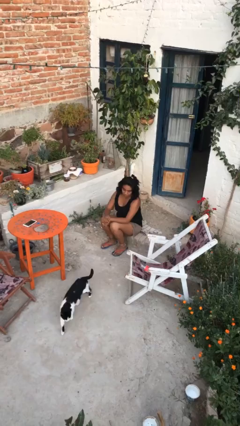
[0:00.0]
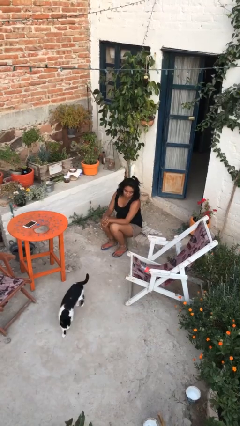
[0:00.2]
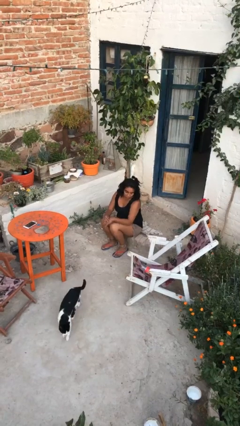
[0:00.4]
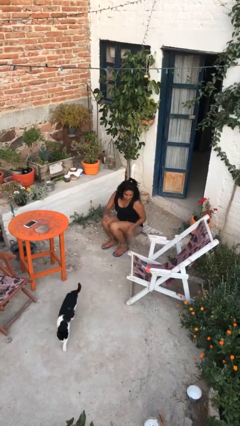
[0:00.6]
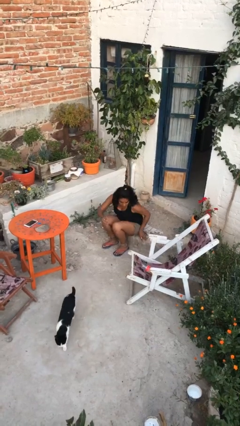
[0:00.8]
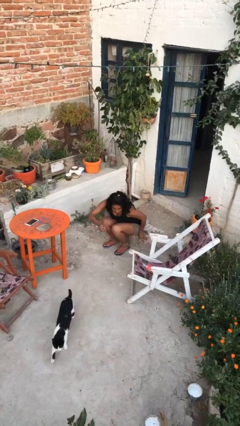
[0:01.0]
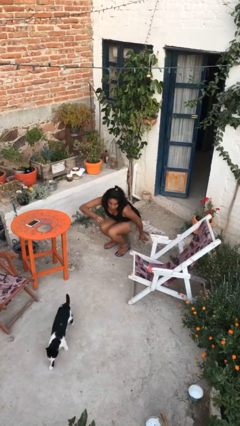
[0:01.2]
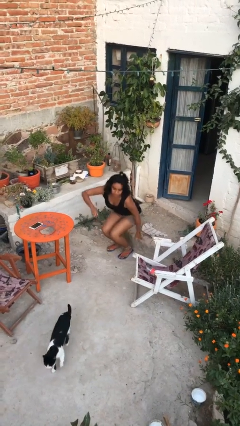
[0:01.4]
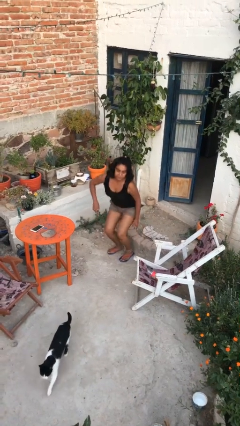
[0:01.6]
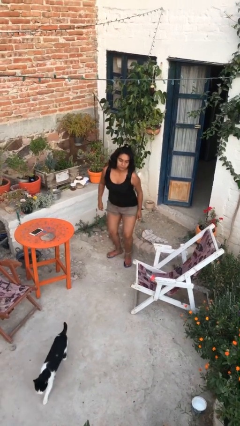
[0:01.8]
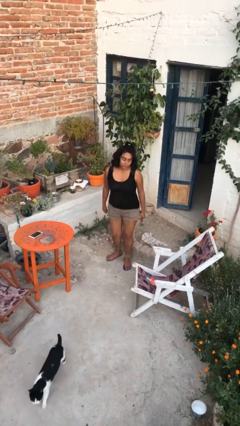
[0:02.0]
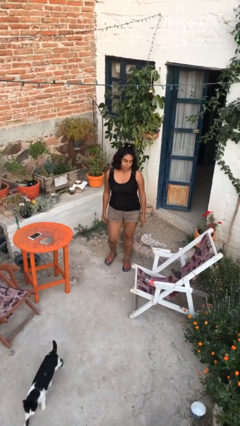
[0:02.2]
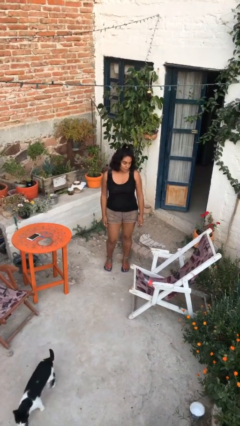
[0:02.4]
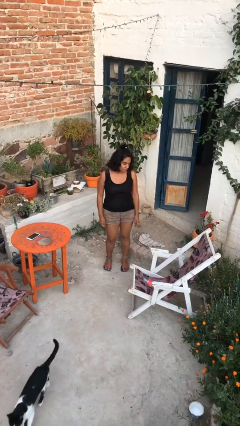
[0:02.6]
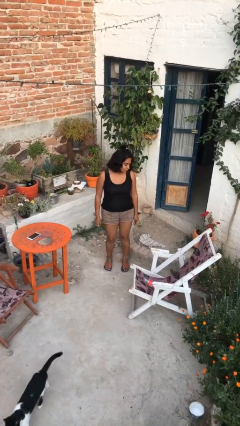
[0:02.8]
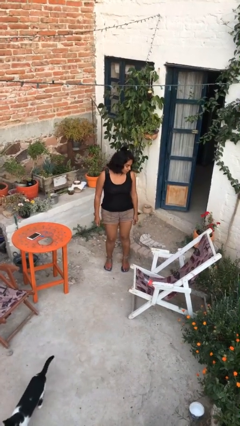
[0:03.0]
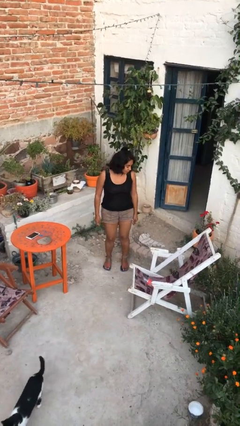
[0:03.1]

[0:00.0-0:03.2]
person stands up

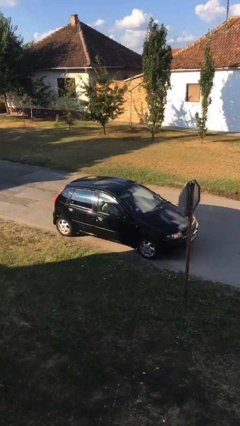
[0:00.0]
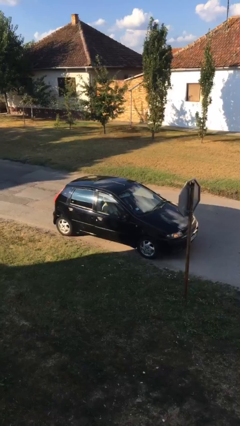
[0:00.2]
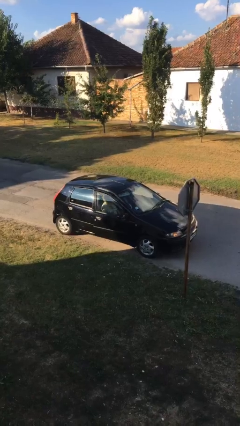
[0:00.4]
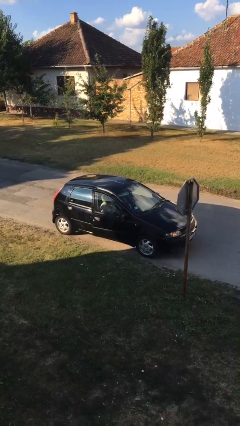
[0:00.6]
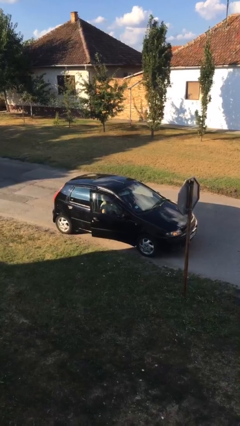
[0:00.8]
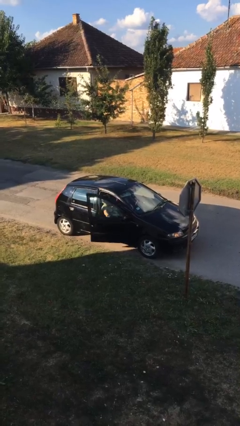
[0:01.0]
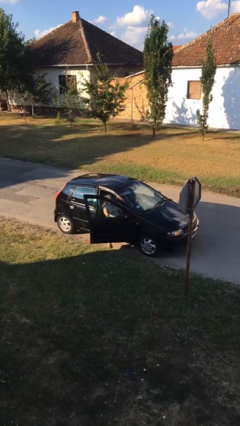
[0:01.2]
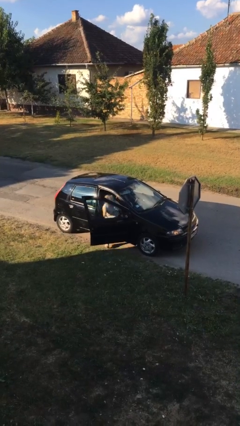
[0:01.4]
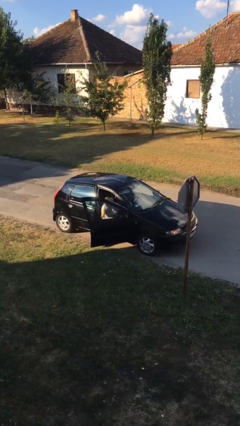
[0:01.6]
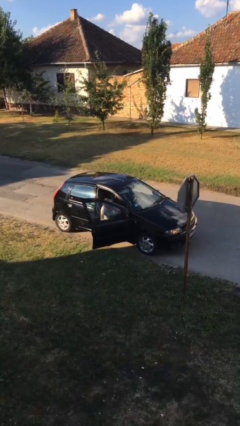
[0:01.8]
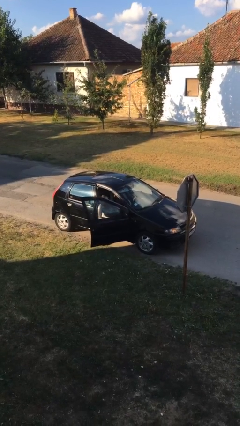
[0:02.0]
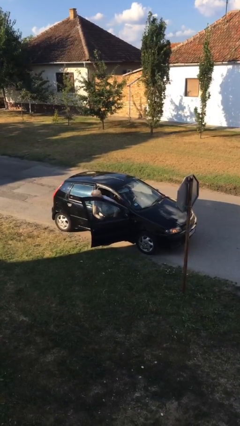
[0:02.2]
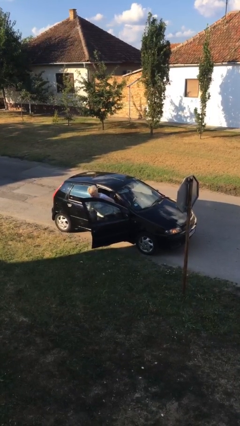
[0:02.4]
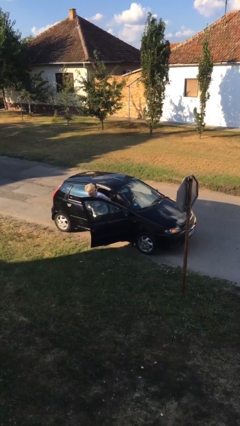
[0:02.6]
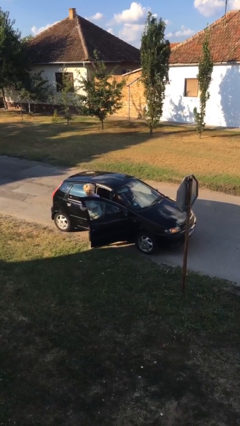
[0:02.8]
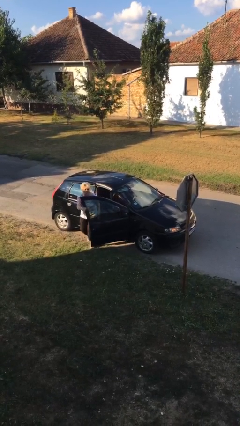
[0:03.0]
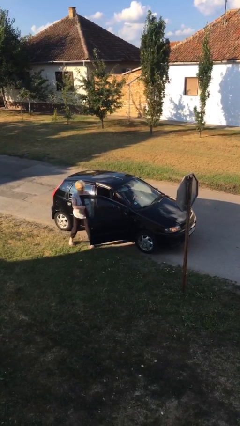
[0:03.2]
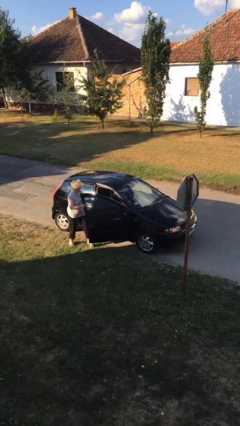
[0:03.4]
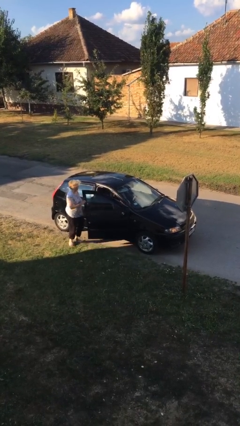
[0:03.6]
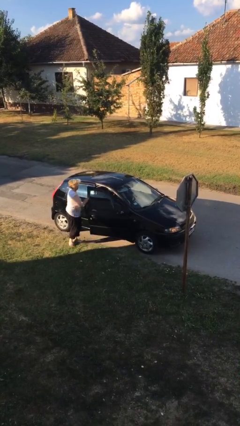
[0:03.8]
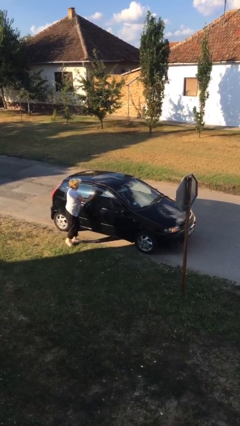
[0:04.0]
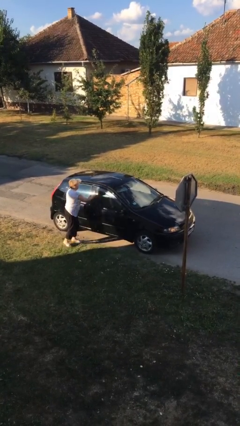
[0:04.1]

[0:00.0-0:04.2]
car drops off person

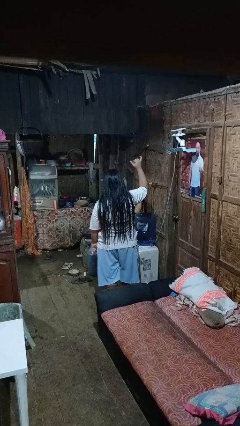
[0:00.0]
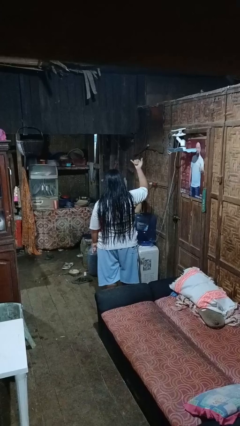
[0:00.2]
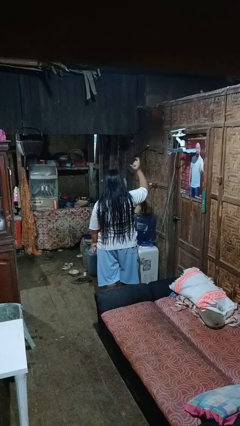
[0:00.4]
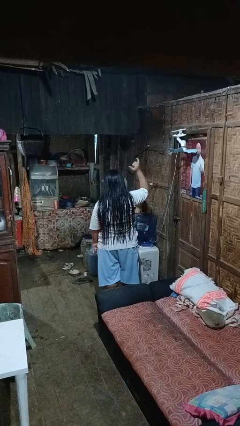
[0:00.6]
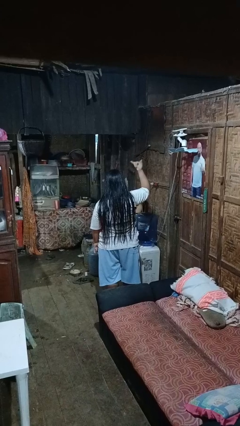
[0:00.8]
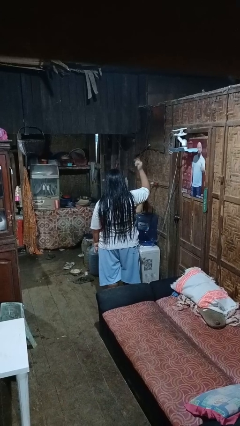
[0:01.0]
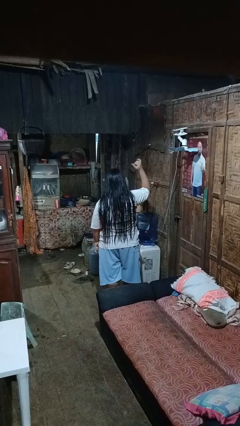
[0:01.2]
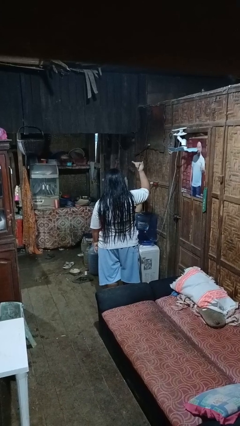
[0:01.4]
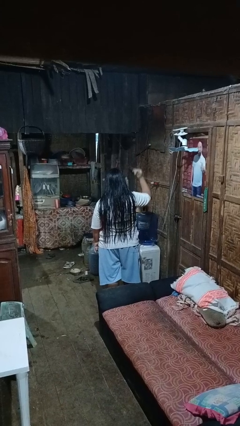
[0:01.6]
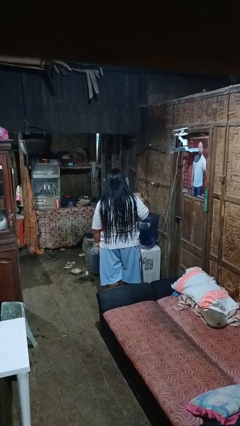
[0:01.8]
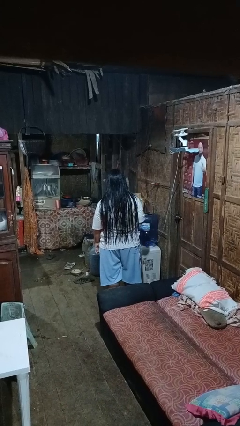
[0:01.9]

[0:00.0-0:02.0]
person gestures hang loose

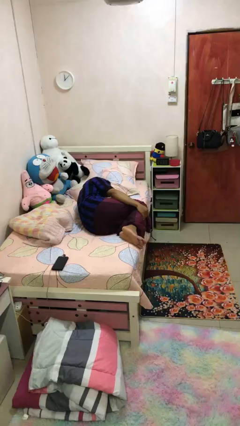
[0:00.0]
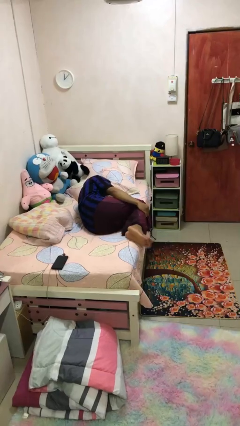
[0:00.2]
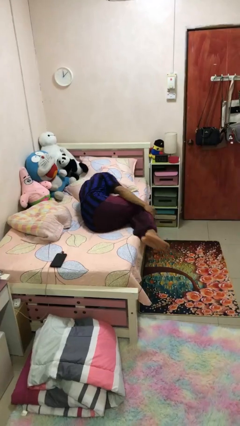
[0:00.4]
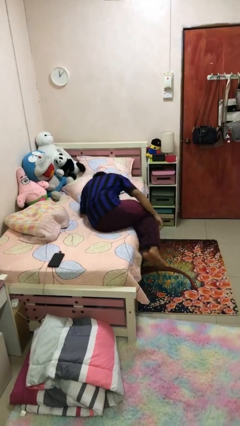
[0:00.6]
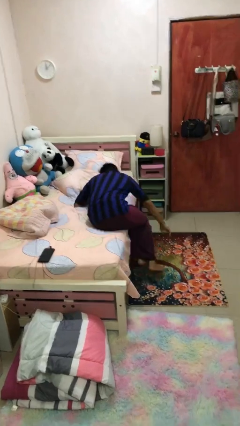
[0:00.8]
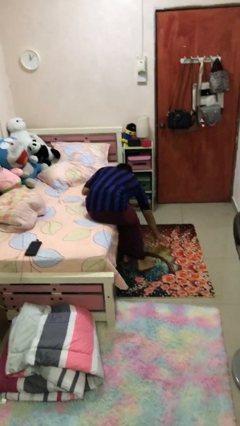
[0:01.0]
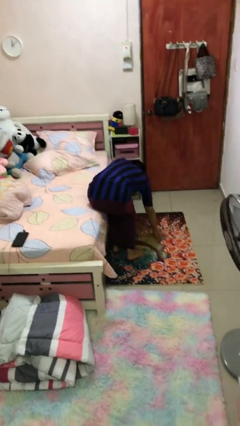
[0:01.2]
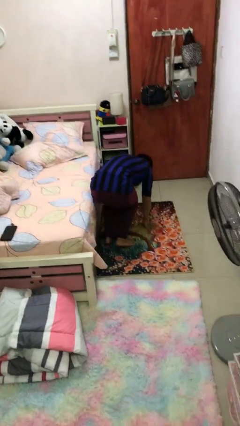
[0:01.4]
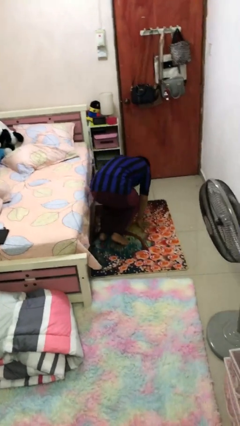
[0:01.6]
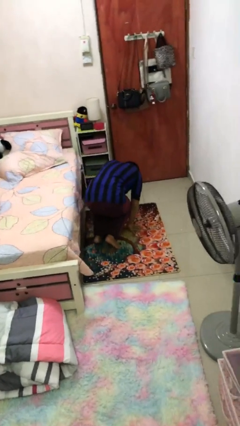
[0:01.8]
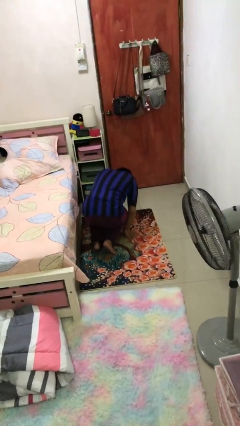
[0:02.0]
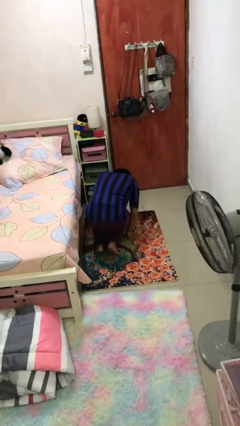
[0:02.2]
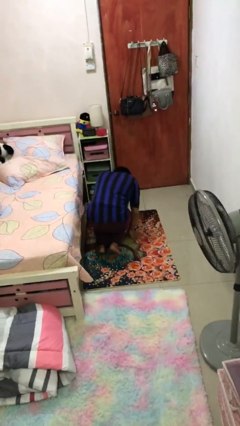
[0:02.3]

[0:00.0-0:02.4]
person falls from bed

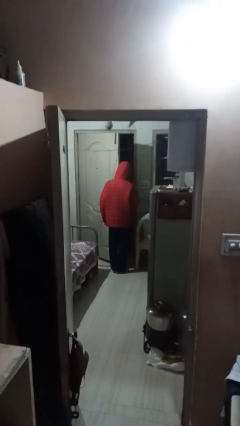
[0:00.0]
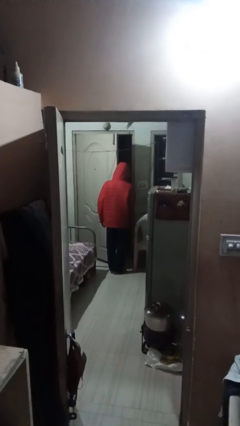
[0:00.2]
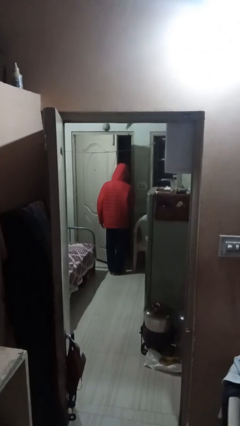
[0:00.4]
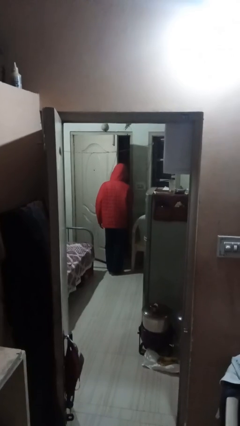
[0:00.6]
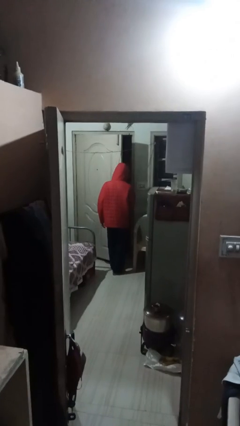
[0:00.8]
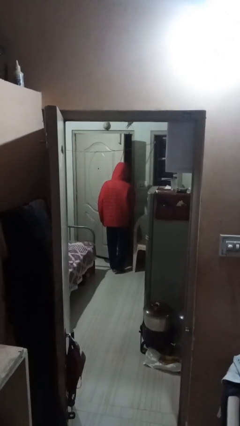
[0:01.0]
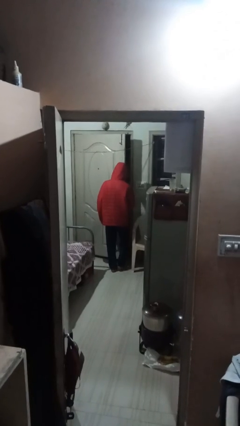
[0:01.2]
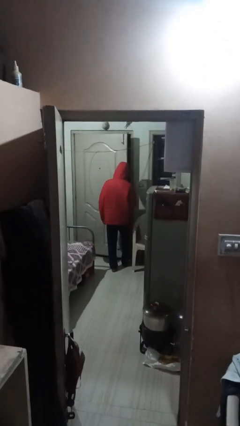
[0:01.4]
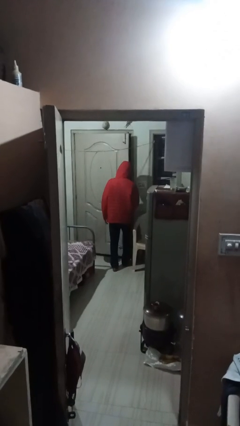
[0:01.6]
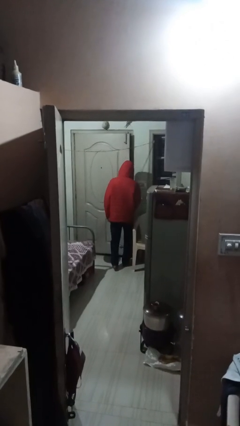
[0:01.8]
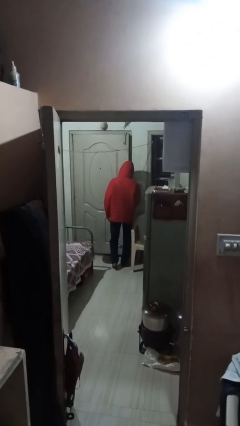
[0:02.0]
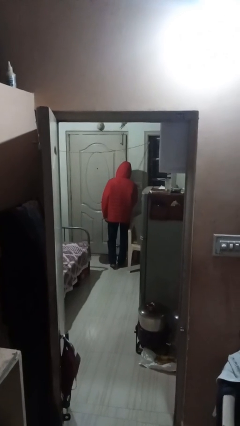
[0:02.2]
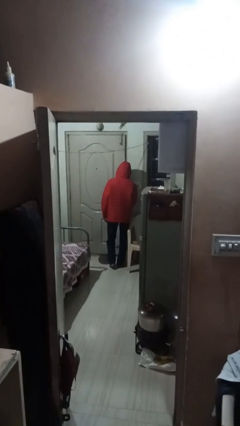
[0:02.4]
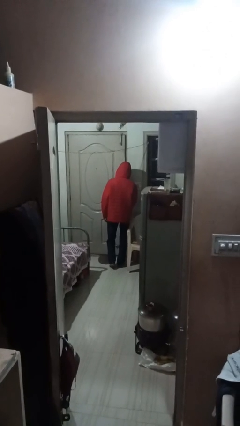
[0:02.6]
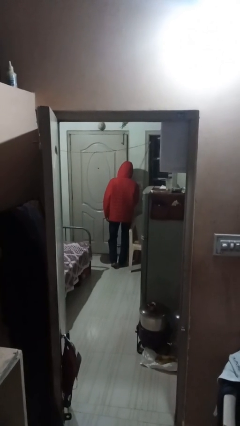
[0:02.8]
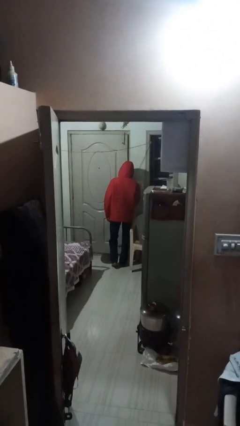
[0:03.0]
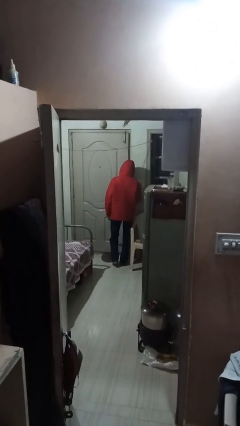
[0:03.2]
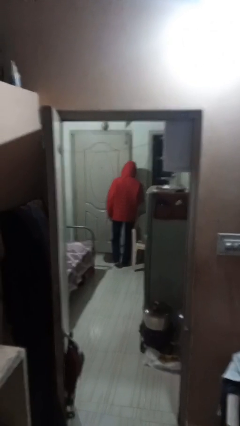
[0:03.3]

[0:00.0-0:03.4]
person closes facility door

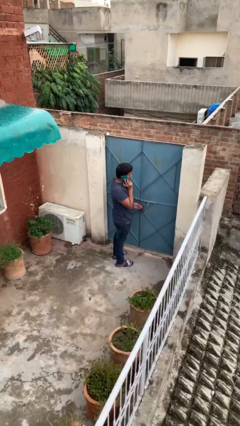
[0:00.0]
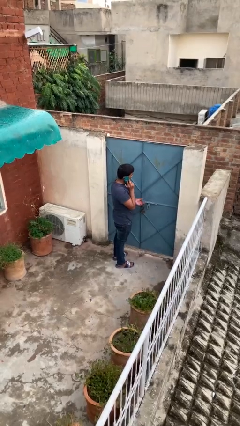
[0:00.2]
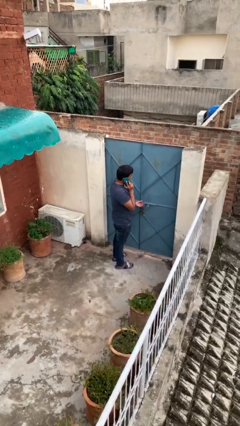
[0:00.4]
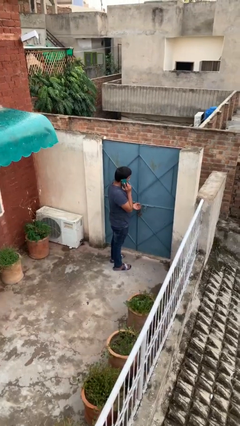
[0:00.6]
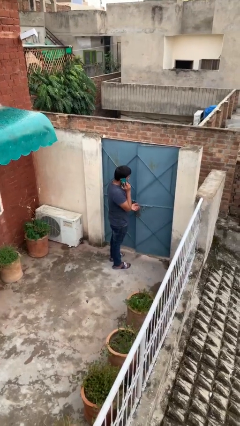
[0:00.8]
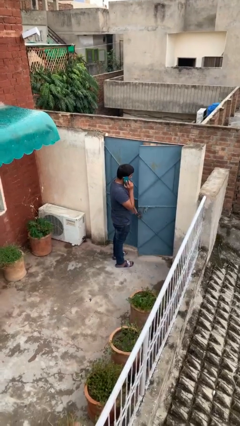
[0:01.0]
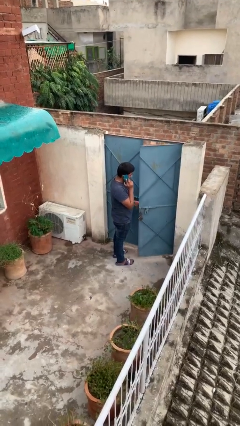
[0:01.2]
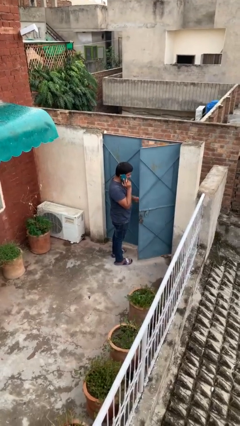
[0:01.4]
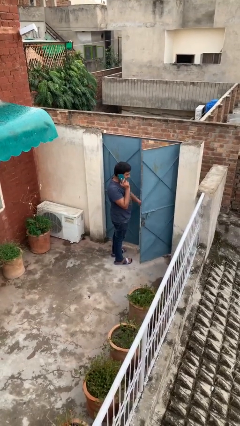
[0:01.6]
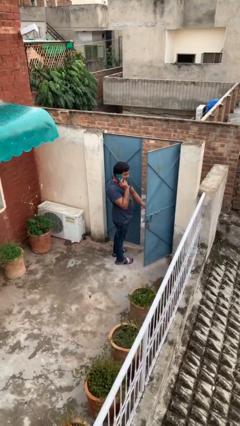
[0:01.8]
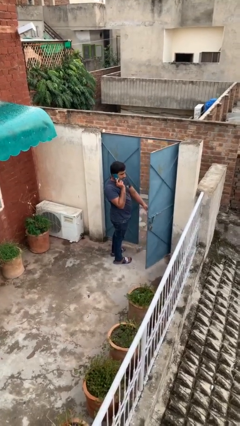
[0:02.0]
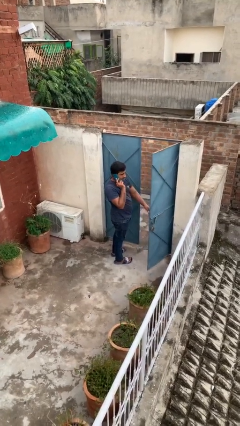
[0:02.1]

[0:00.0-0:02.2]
person opens facility door

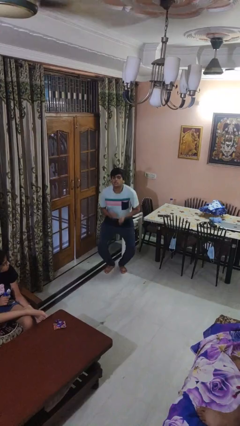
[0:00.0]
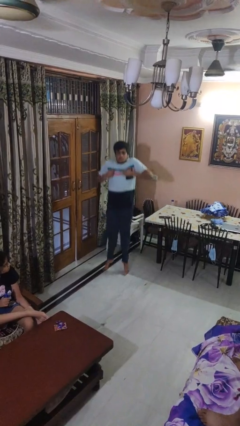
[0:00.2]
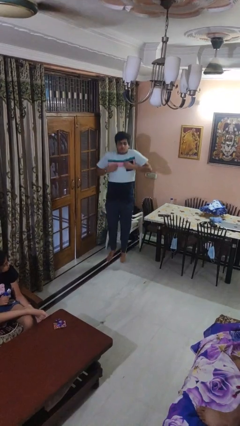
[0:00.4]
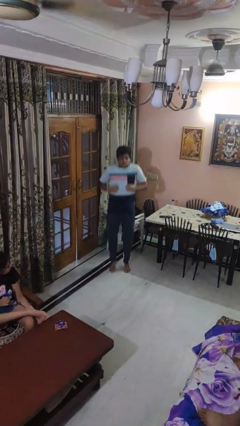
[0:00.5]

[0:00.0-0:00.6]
person jumps
